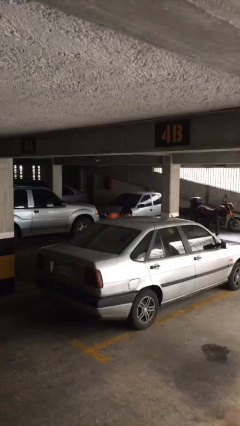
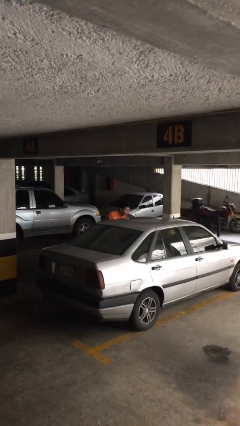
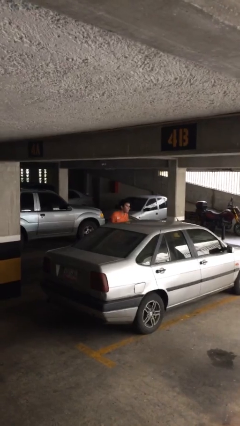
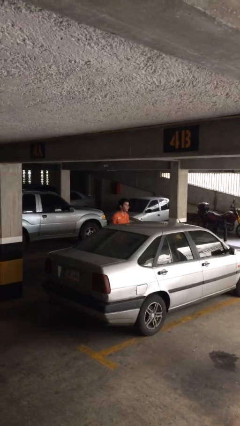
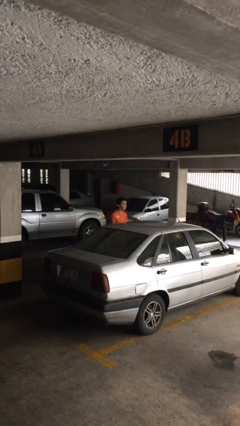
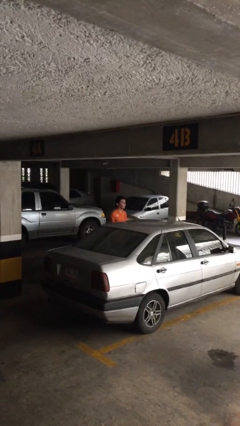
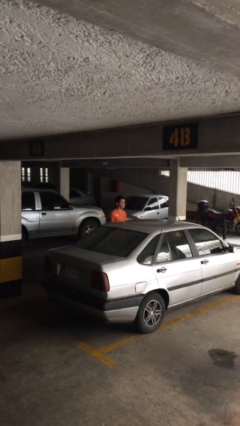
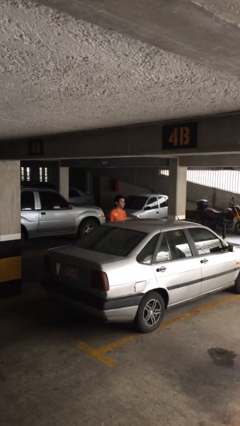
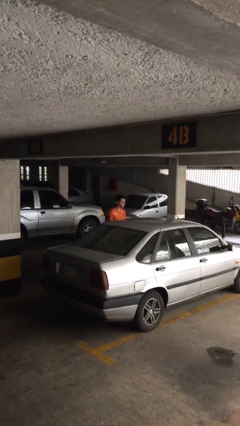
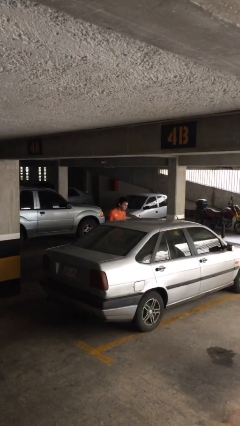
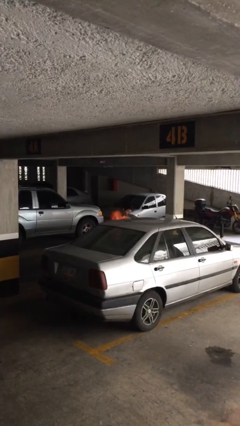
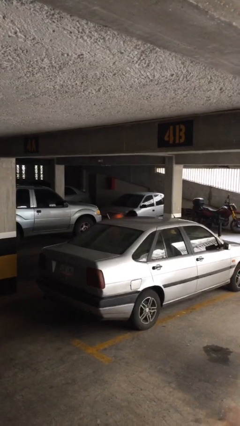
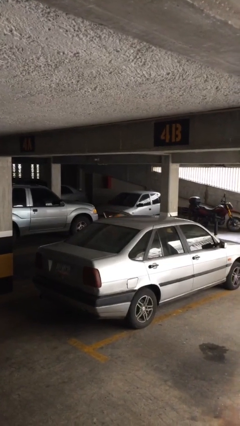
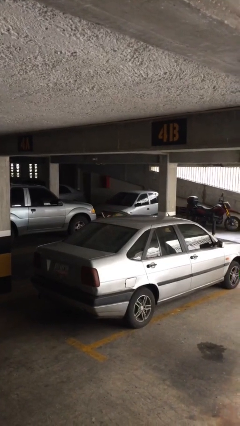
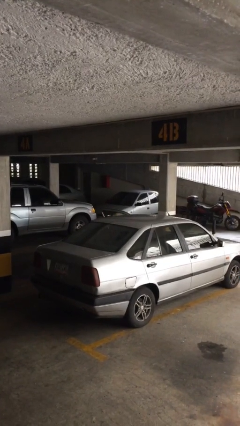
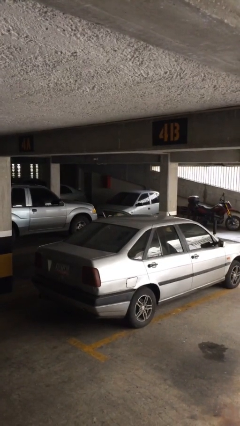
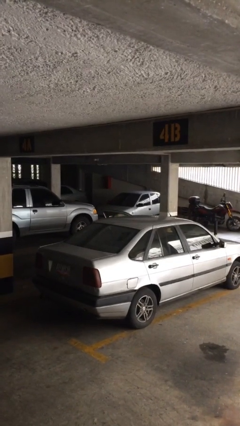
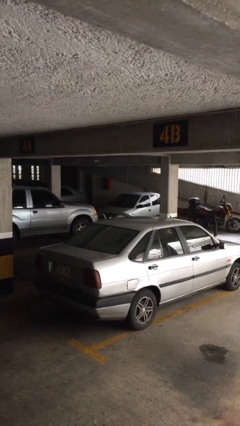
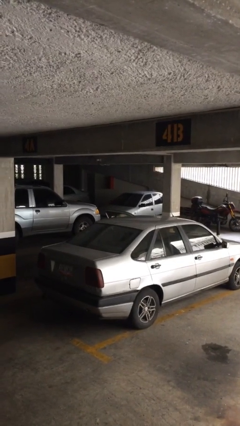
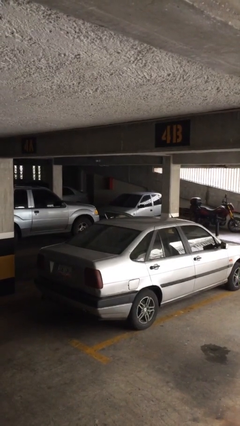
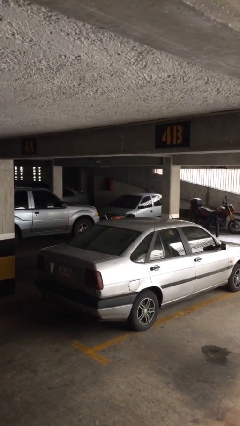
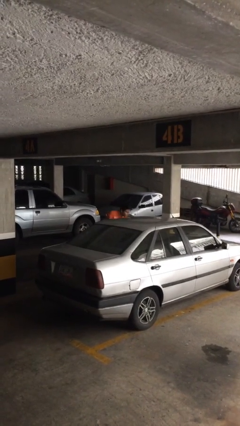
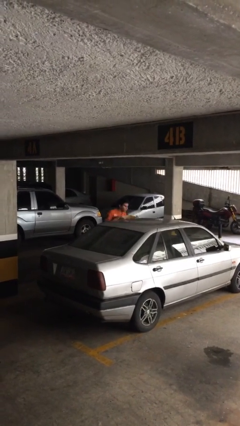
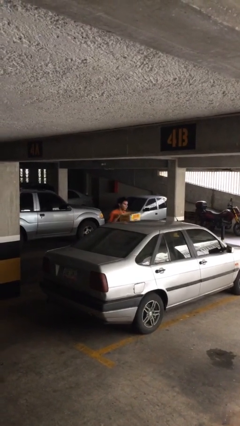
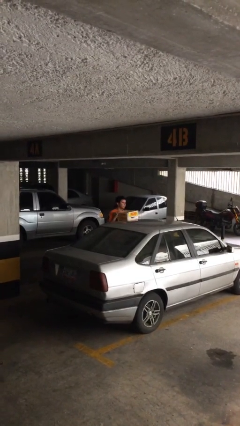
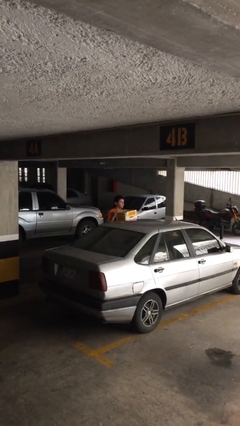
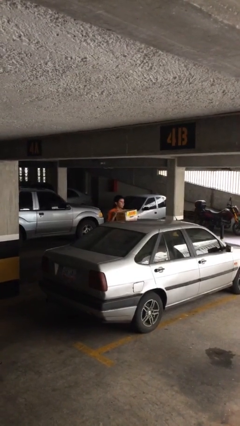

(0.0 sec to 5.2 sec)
person unloads car

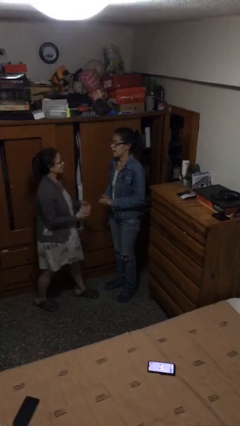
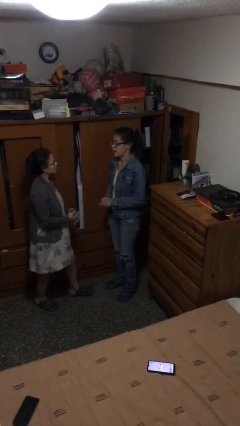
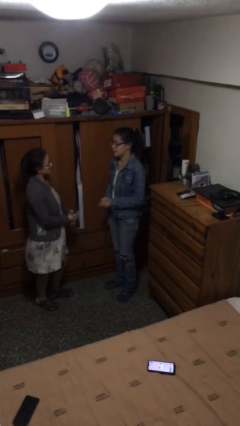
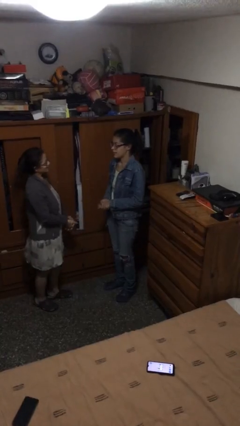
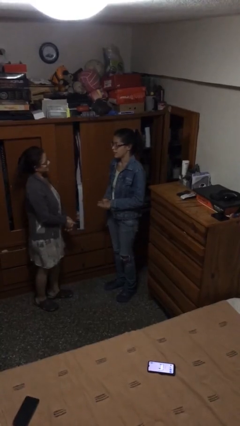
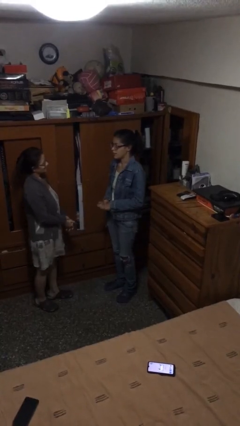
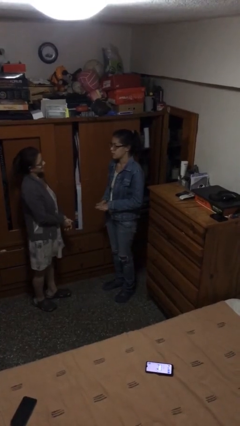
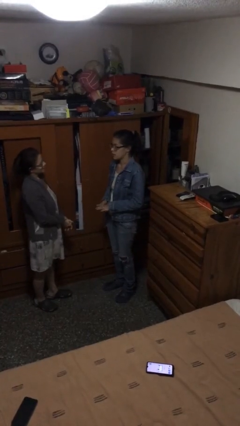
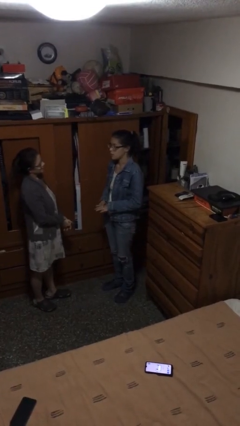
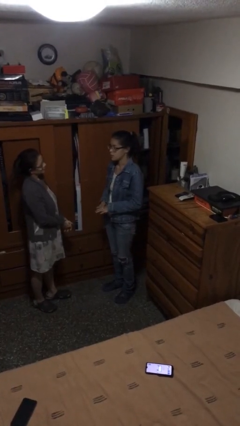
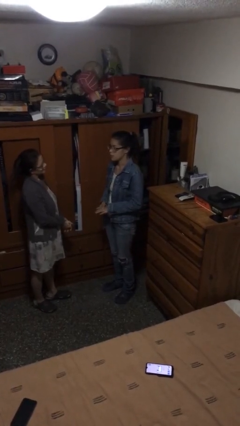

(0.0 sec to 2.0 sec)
person talks to person

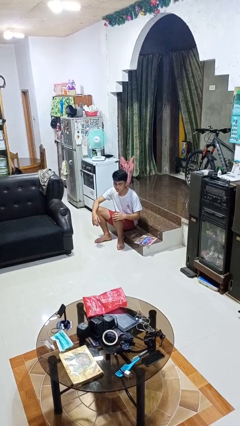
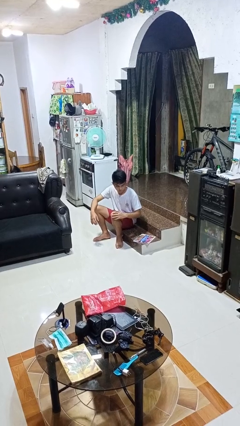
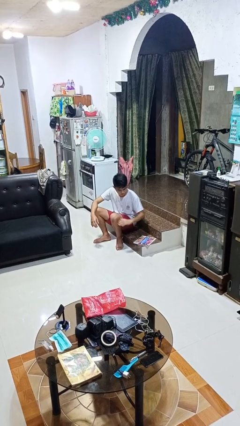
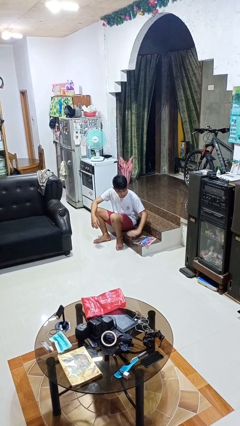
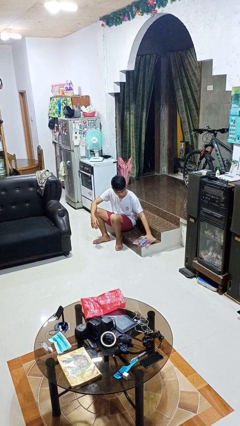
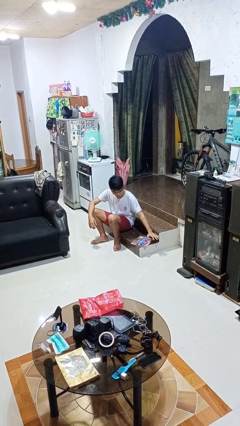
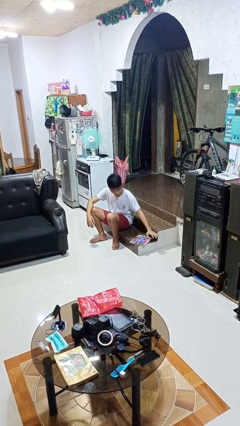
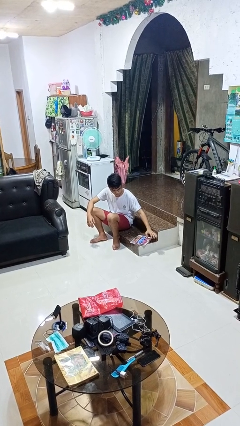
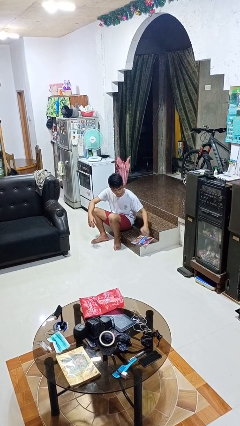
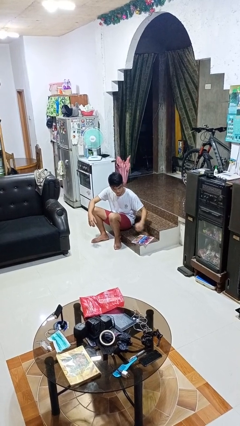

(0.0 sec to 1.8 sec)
person waves hand over object

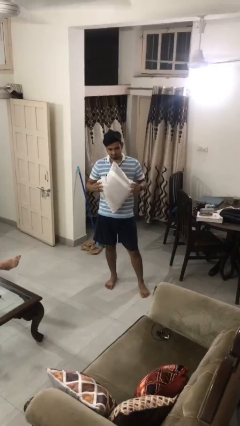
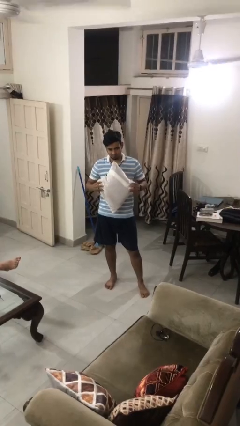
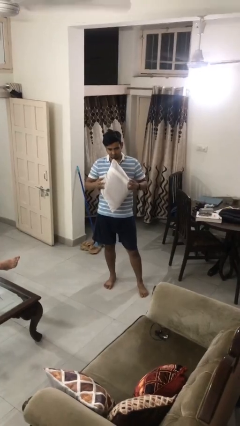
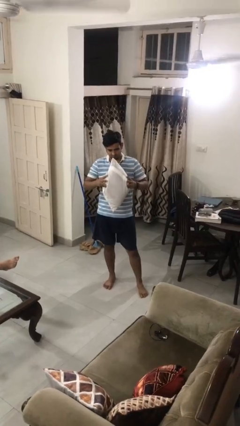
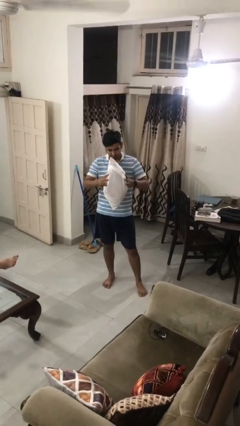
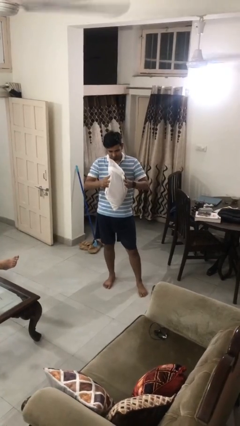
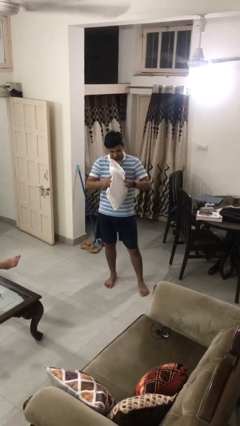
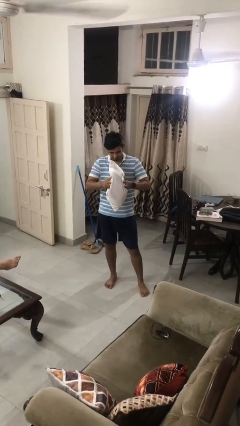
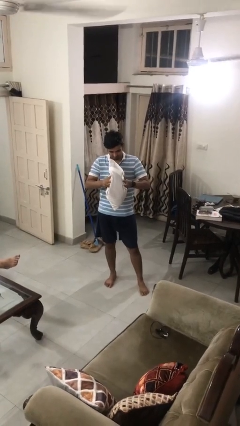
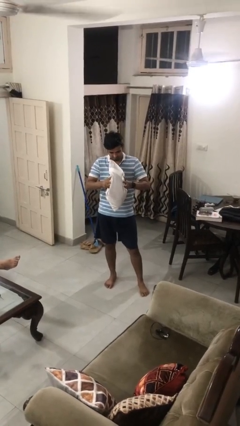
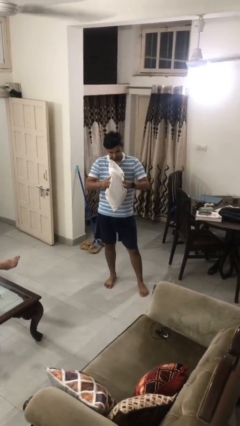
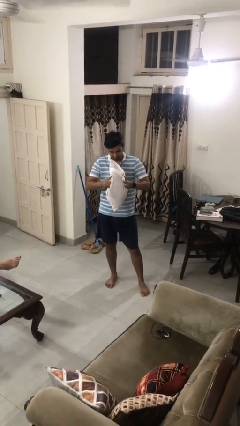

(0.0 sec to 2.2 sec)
person squeezes object

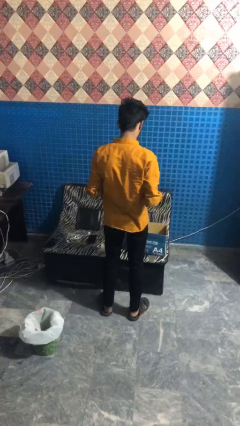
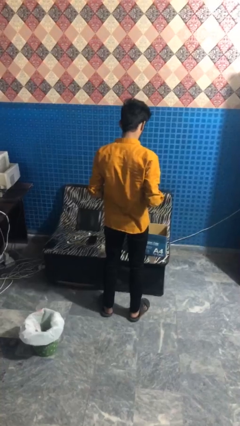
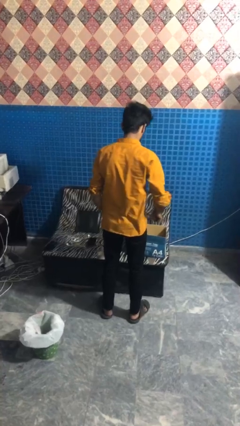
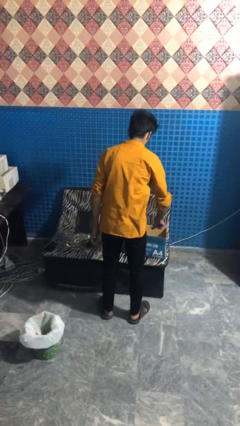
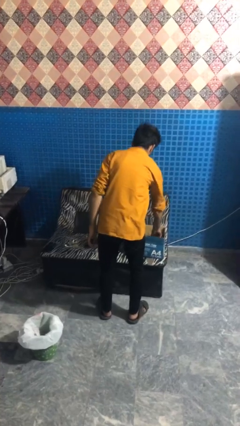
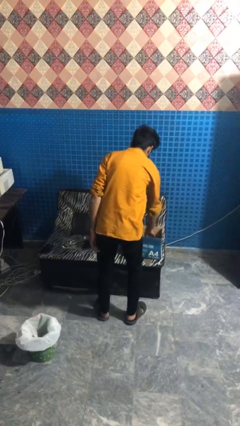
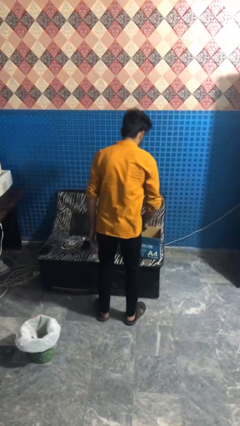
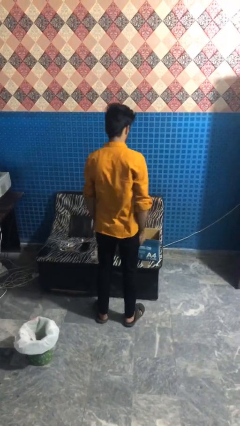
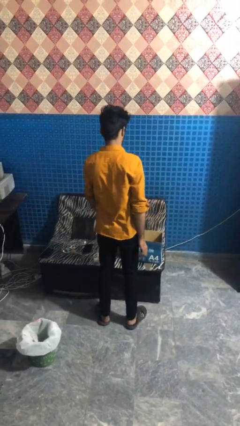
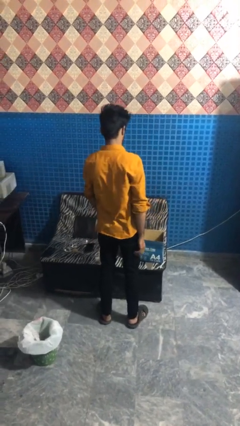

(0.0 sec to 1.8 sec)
person puts object into box

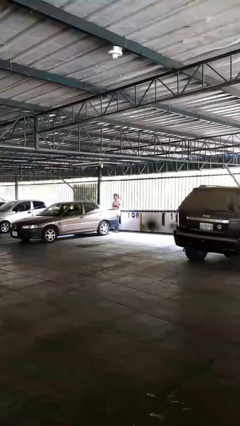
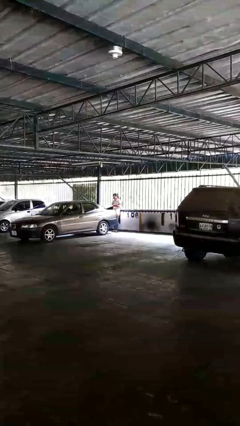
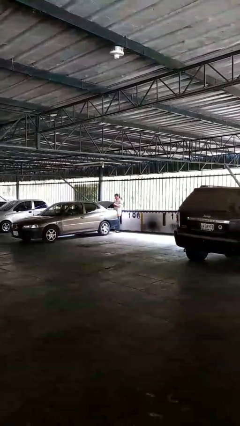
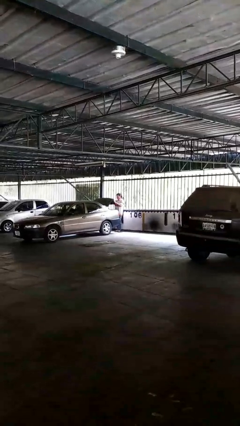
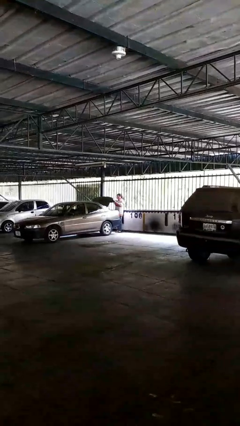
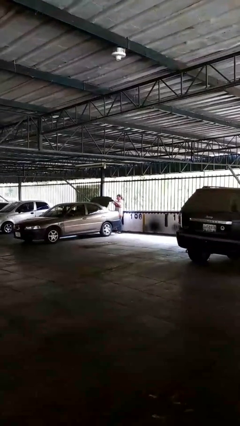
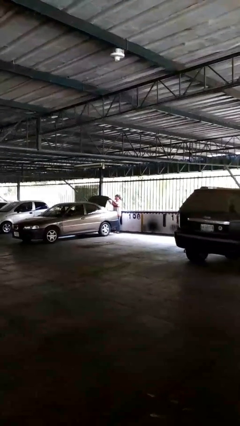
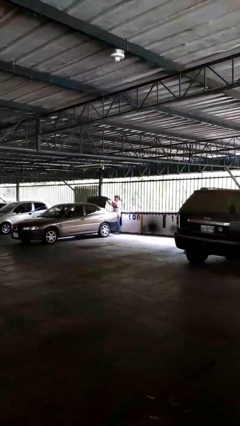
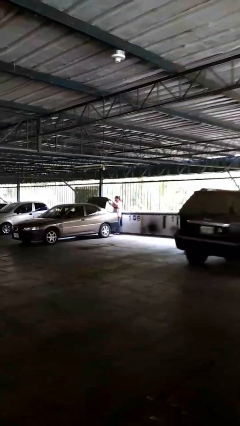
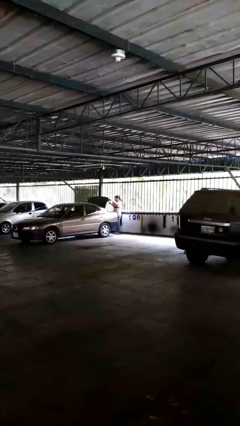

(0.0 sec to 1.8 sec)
person opens car trunk

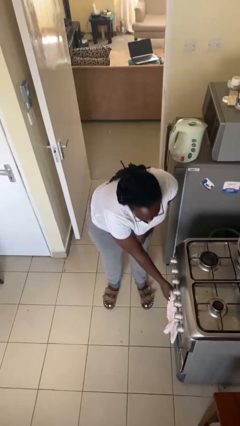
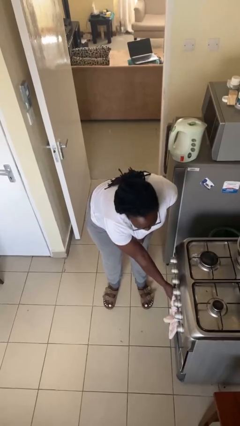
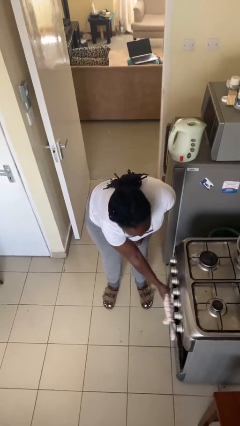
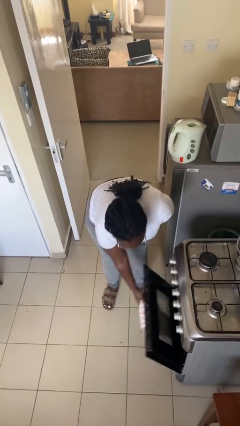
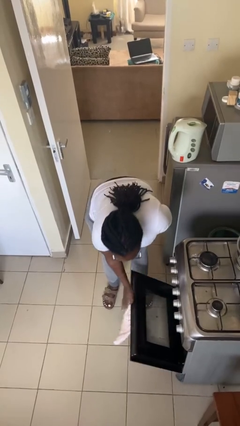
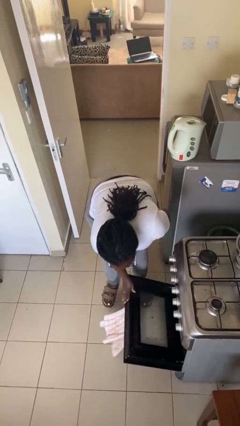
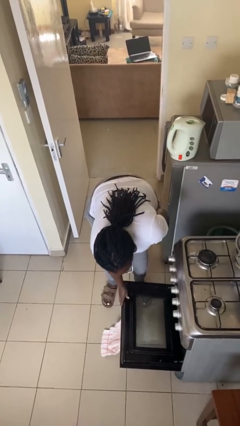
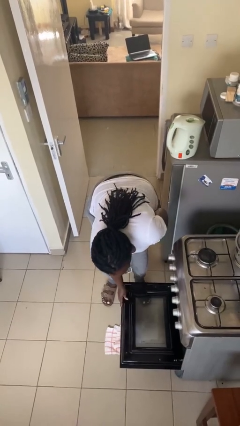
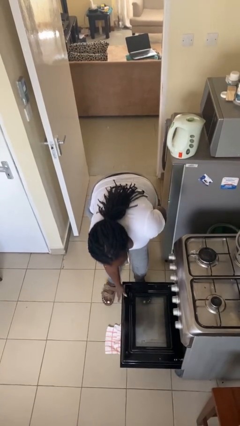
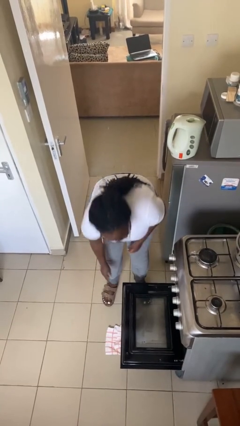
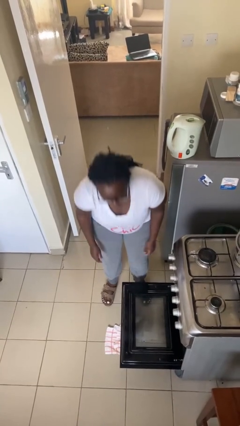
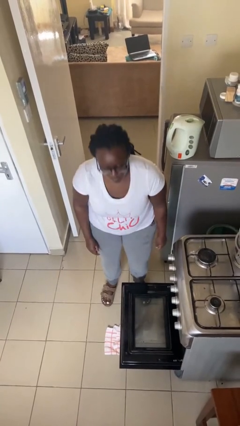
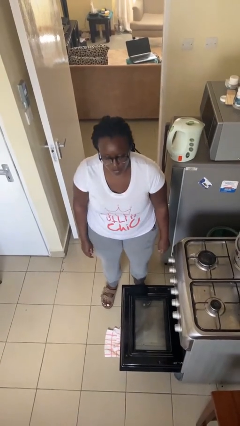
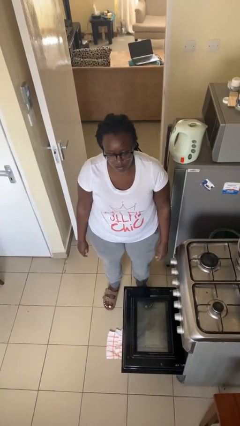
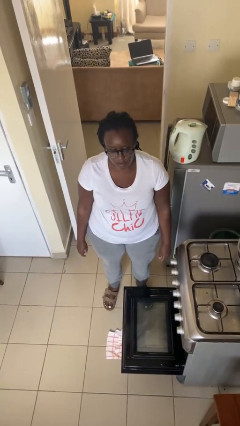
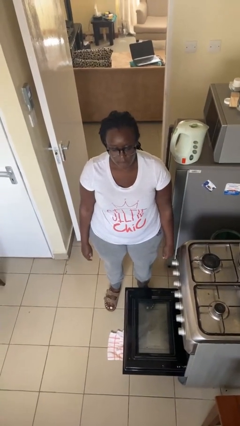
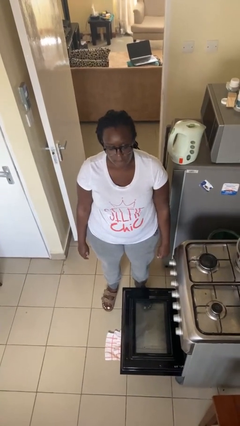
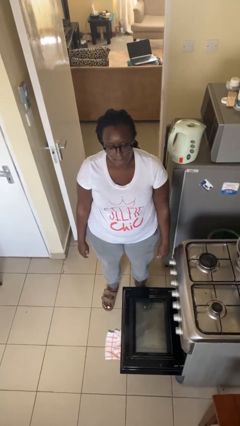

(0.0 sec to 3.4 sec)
person opens oven door
